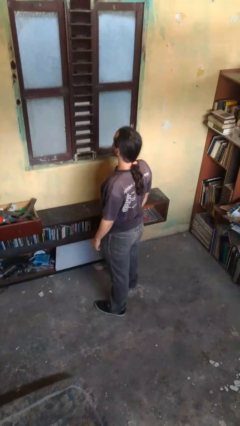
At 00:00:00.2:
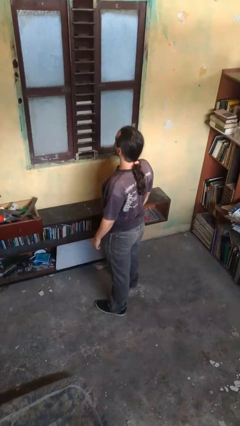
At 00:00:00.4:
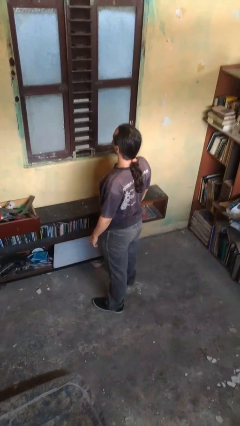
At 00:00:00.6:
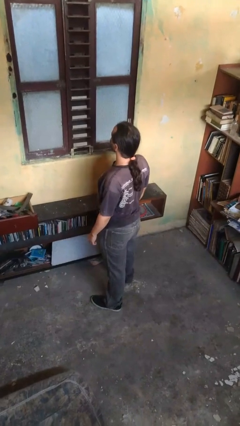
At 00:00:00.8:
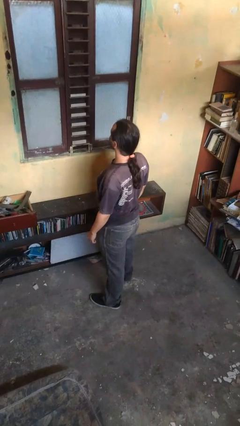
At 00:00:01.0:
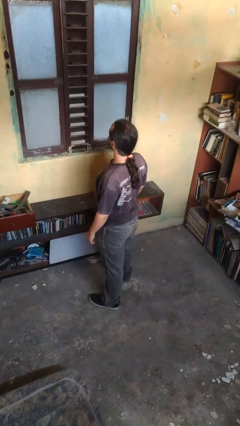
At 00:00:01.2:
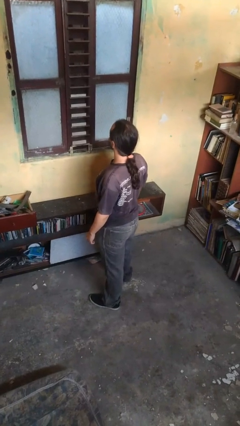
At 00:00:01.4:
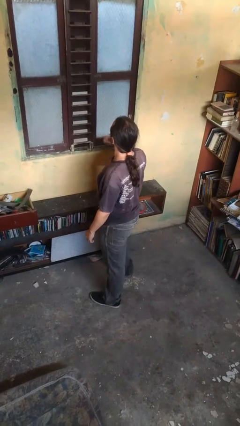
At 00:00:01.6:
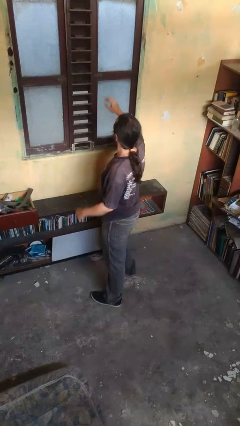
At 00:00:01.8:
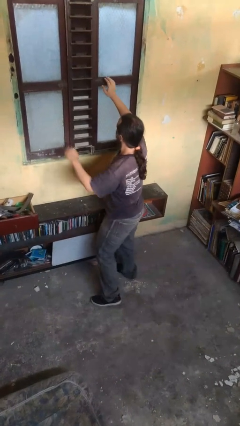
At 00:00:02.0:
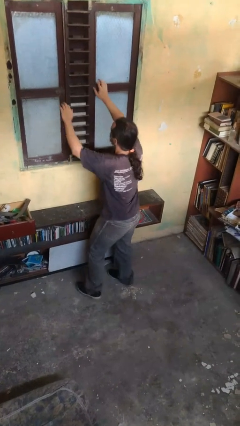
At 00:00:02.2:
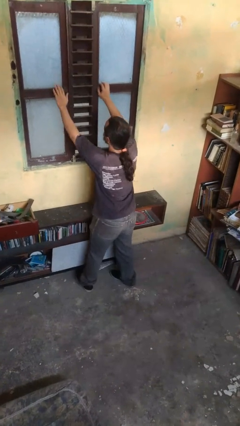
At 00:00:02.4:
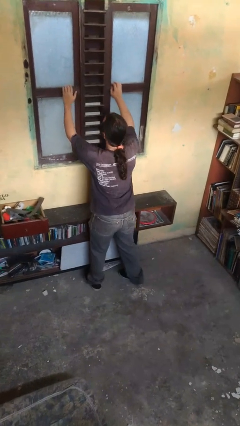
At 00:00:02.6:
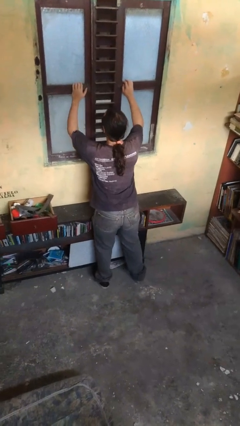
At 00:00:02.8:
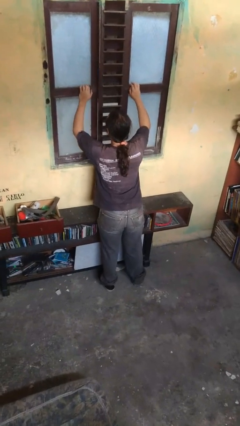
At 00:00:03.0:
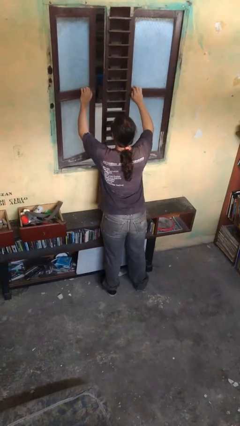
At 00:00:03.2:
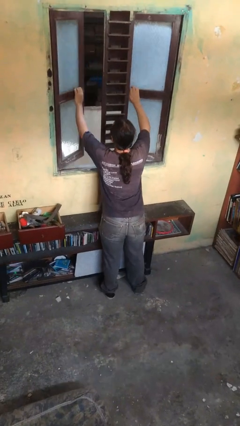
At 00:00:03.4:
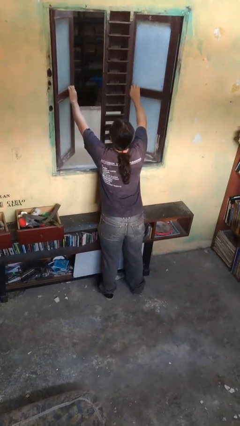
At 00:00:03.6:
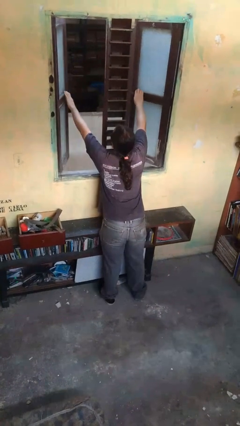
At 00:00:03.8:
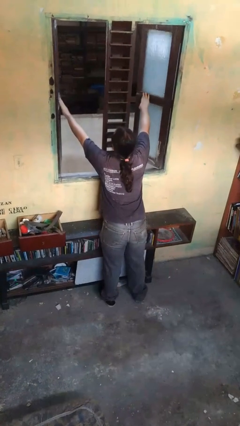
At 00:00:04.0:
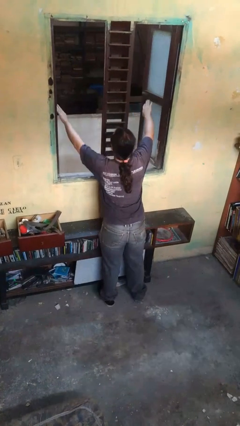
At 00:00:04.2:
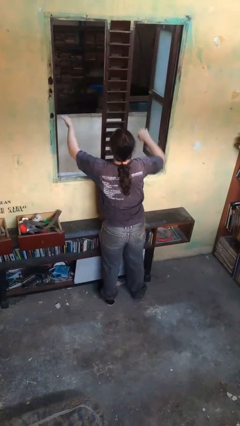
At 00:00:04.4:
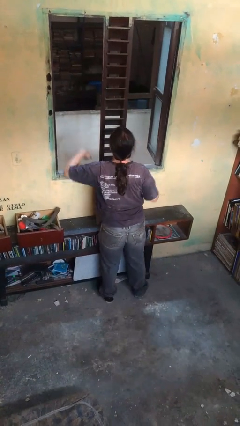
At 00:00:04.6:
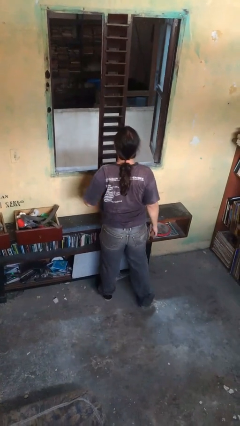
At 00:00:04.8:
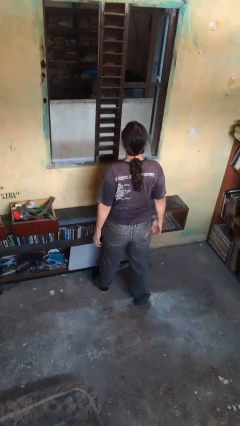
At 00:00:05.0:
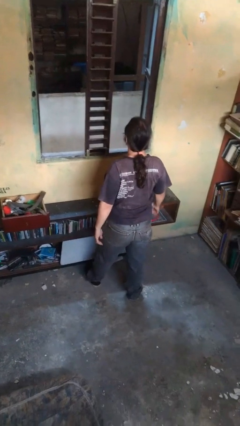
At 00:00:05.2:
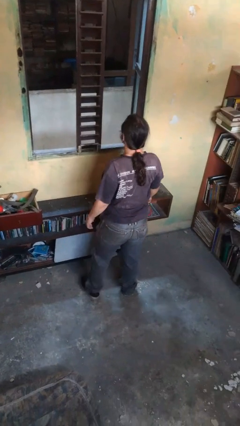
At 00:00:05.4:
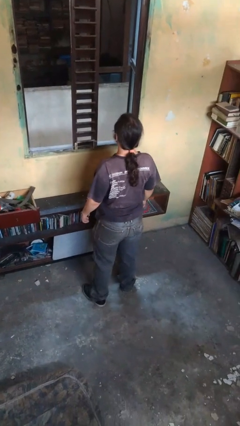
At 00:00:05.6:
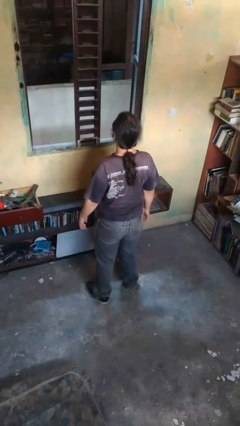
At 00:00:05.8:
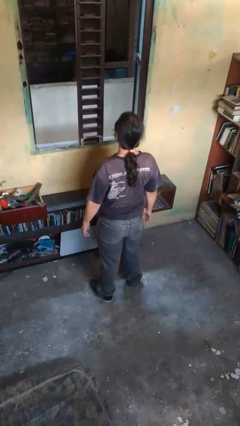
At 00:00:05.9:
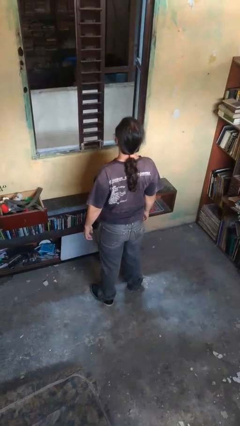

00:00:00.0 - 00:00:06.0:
person opens home window

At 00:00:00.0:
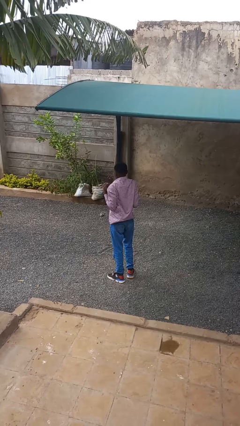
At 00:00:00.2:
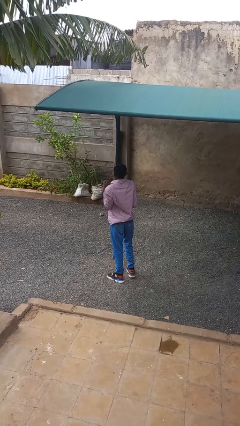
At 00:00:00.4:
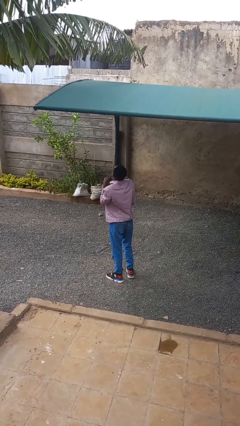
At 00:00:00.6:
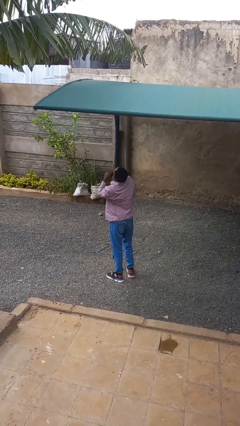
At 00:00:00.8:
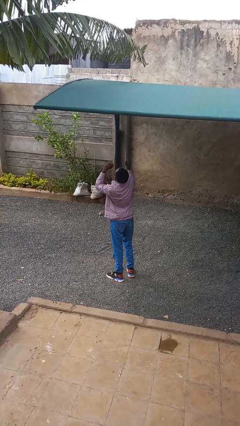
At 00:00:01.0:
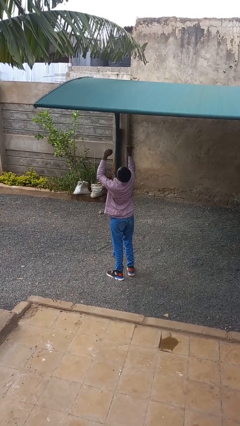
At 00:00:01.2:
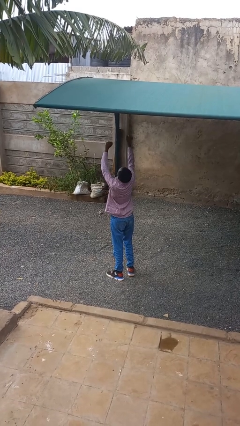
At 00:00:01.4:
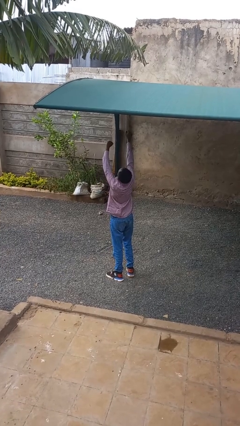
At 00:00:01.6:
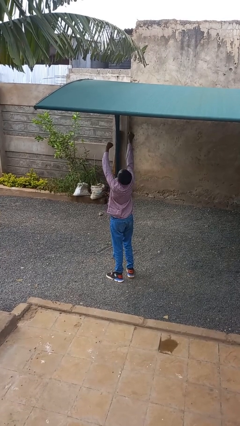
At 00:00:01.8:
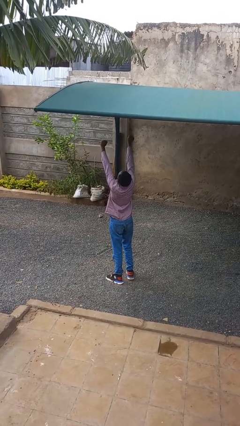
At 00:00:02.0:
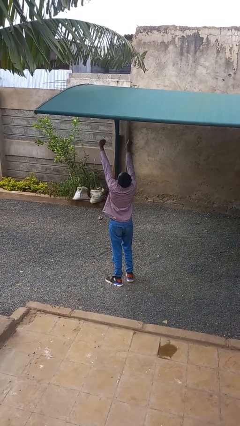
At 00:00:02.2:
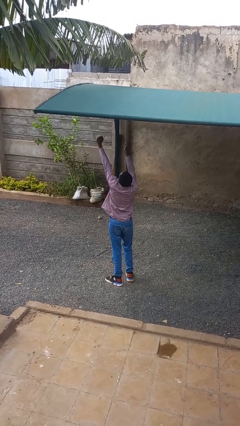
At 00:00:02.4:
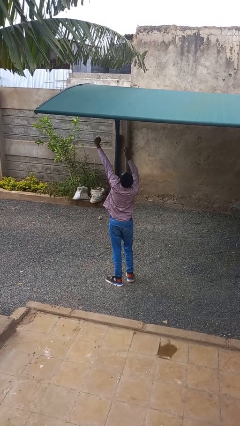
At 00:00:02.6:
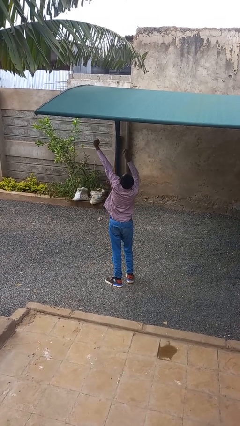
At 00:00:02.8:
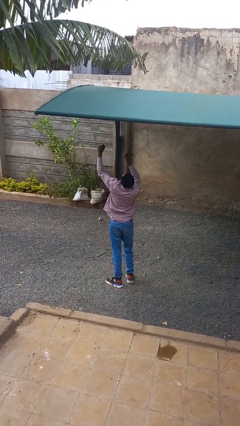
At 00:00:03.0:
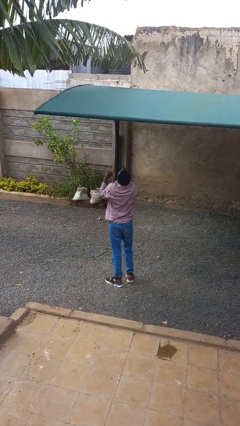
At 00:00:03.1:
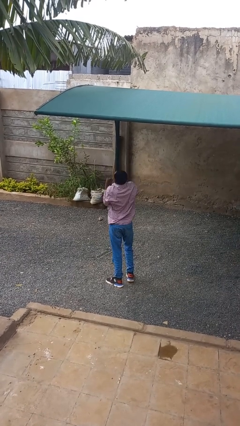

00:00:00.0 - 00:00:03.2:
person stretches arms over head

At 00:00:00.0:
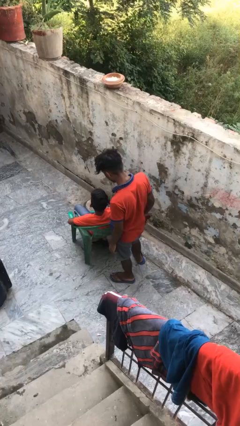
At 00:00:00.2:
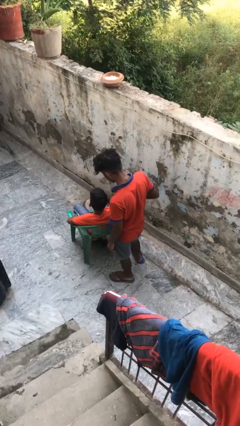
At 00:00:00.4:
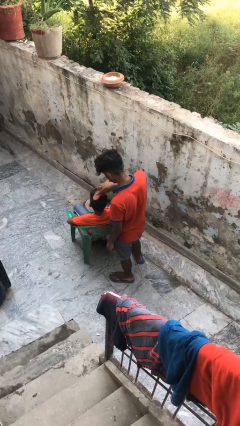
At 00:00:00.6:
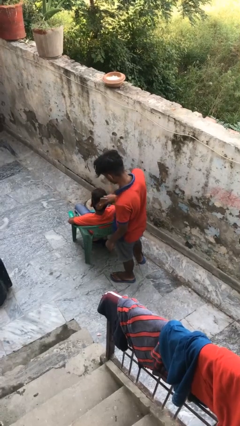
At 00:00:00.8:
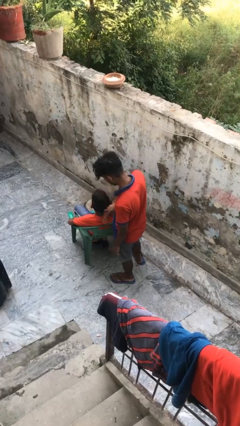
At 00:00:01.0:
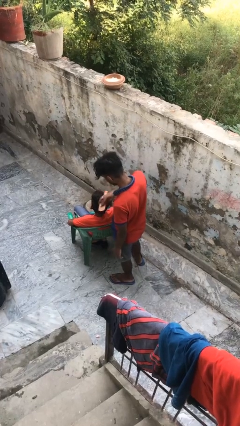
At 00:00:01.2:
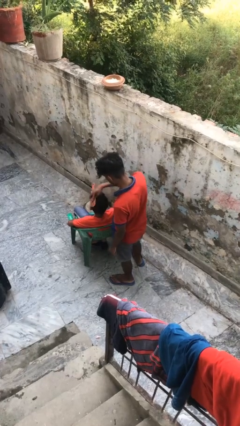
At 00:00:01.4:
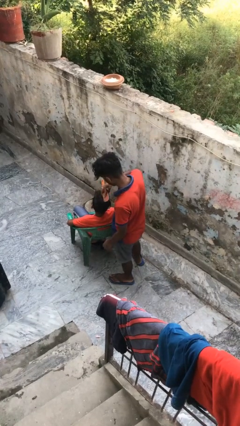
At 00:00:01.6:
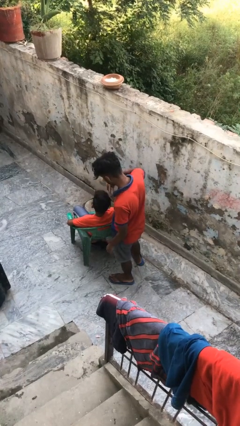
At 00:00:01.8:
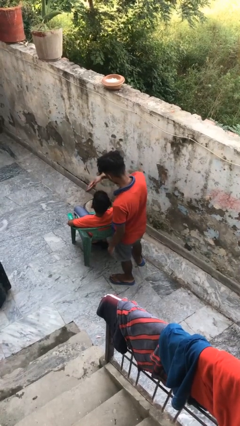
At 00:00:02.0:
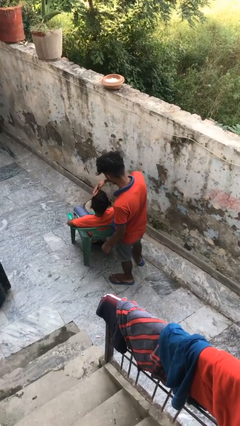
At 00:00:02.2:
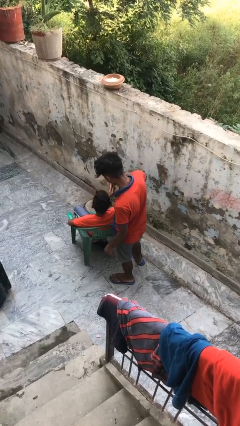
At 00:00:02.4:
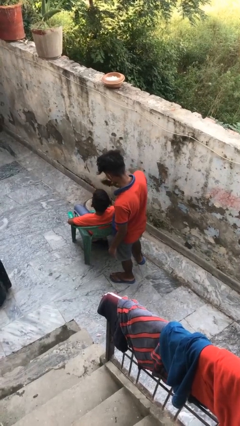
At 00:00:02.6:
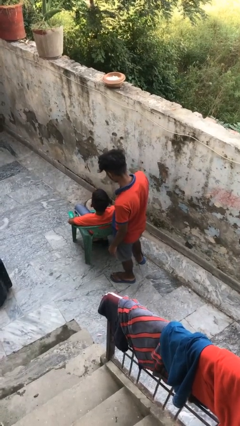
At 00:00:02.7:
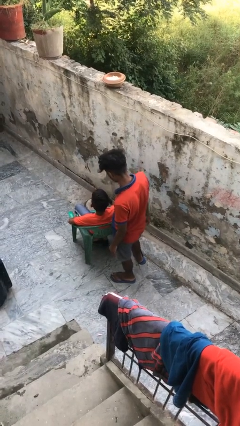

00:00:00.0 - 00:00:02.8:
person brushes hair of person

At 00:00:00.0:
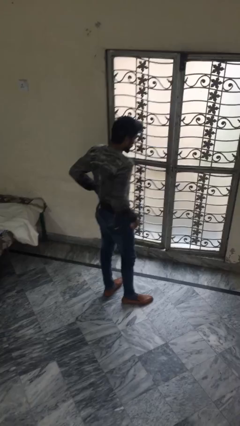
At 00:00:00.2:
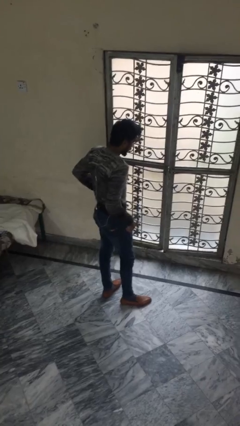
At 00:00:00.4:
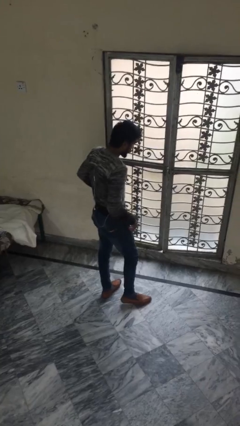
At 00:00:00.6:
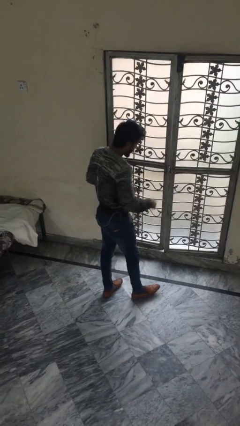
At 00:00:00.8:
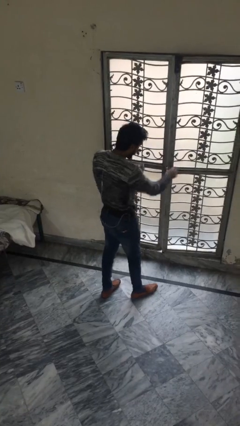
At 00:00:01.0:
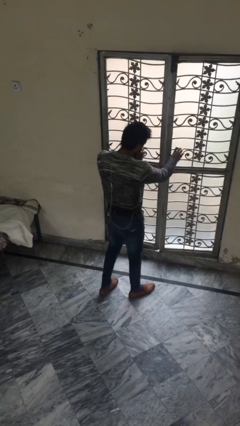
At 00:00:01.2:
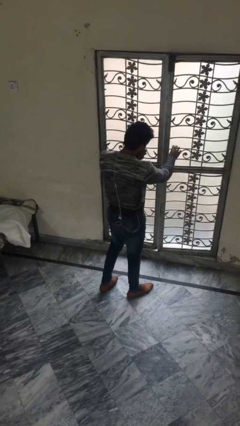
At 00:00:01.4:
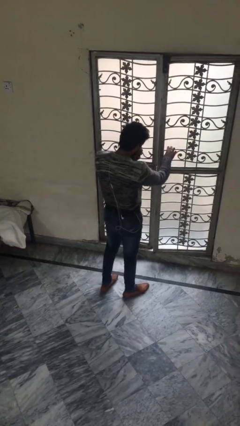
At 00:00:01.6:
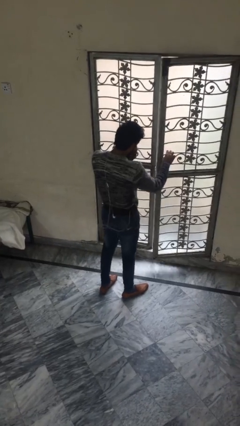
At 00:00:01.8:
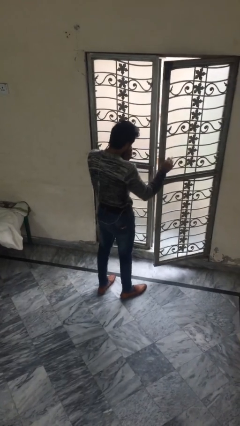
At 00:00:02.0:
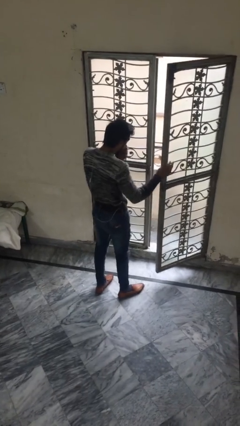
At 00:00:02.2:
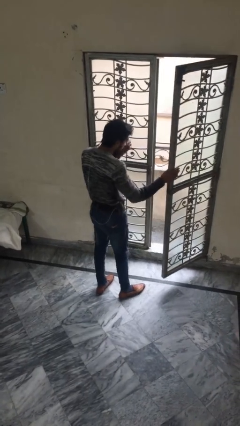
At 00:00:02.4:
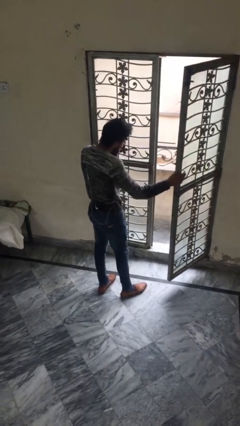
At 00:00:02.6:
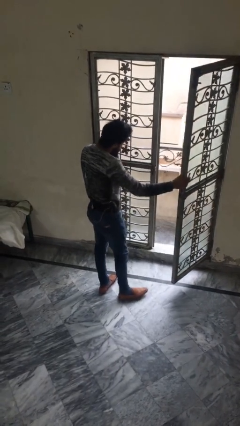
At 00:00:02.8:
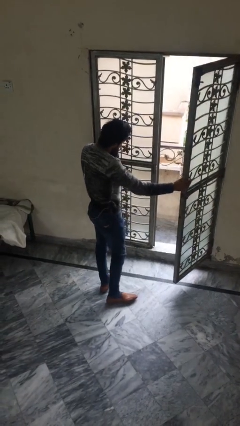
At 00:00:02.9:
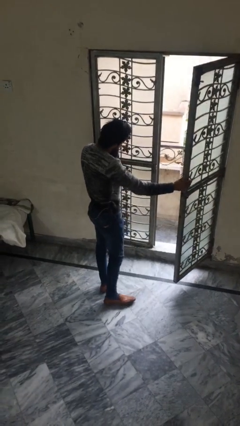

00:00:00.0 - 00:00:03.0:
person opens facility door

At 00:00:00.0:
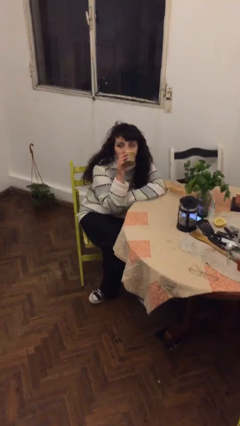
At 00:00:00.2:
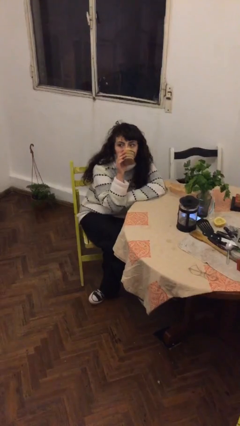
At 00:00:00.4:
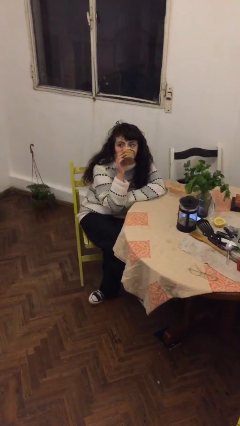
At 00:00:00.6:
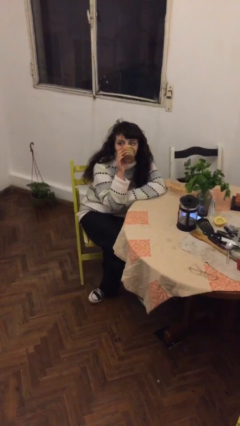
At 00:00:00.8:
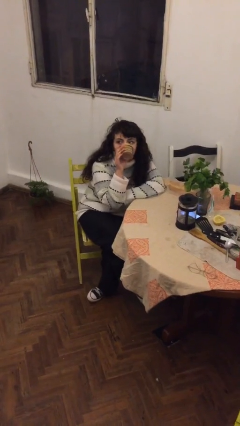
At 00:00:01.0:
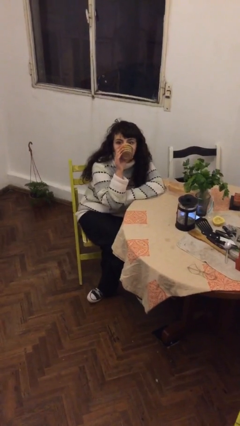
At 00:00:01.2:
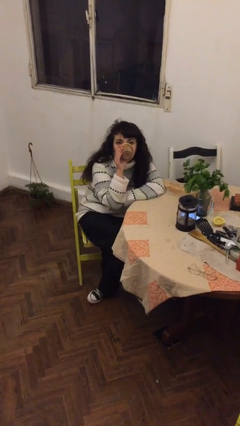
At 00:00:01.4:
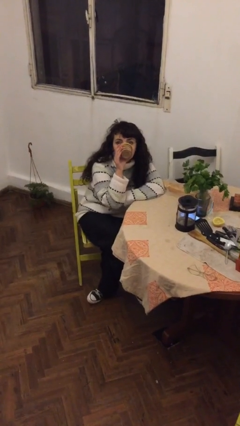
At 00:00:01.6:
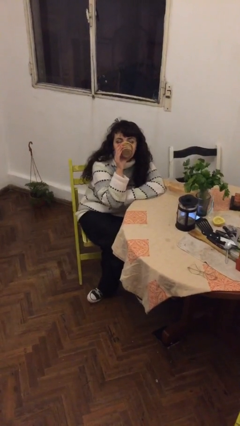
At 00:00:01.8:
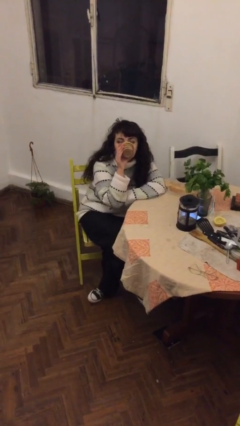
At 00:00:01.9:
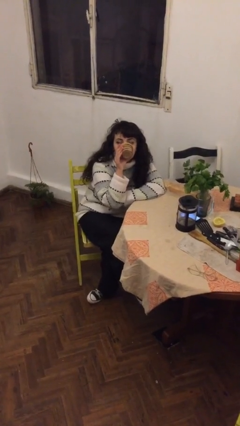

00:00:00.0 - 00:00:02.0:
person drinks from mug
